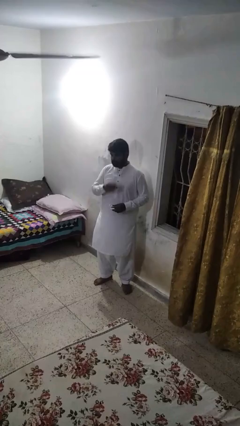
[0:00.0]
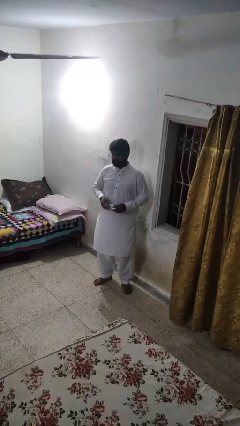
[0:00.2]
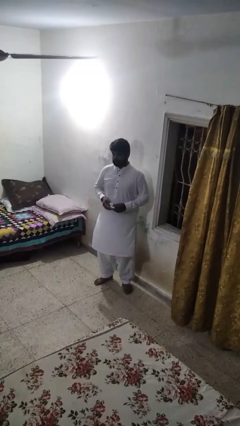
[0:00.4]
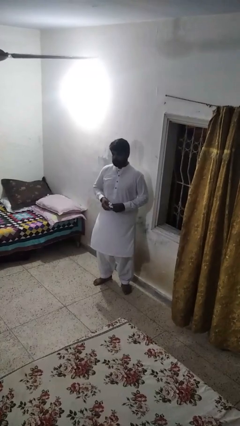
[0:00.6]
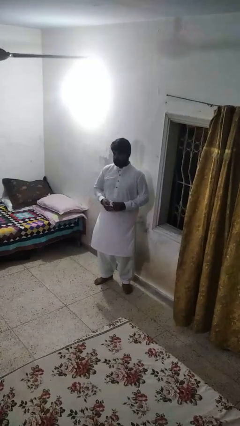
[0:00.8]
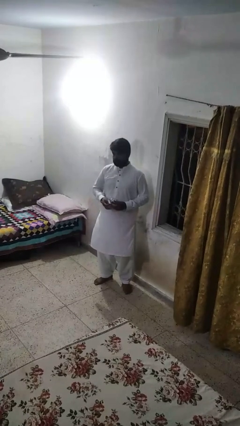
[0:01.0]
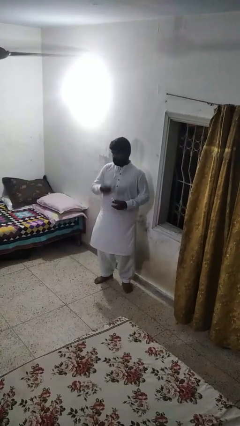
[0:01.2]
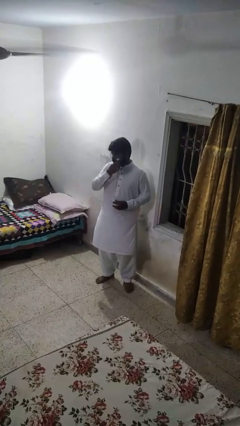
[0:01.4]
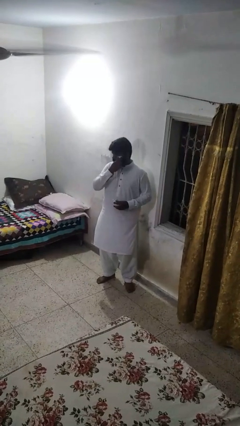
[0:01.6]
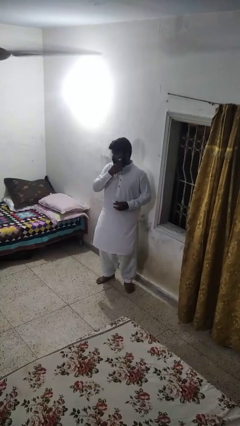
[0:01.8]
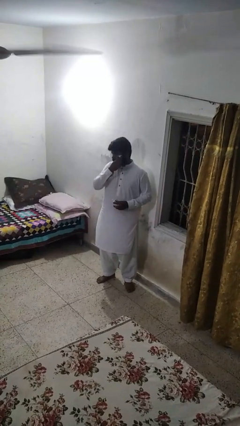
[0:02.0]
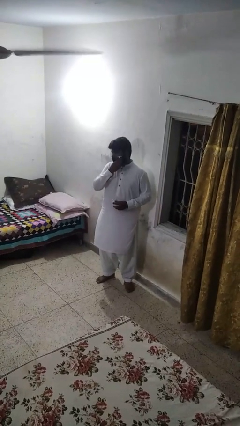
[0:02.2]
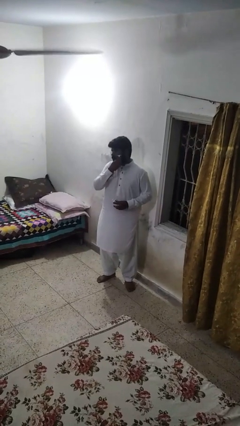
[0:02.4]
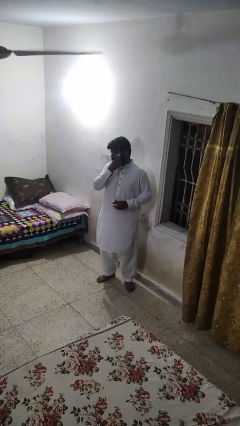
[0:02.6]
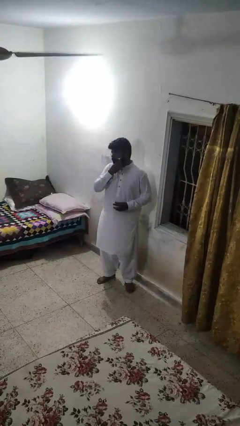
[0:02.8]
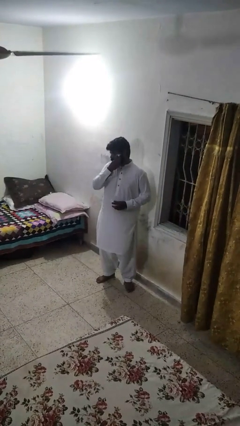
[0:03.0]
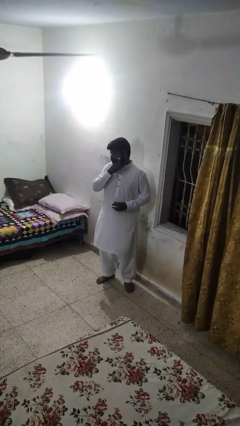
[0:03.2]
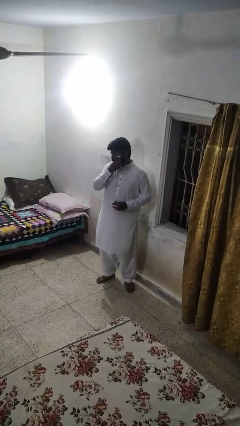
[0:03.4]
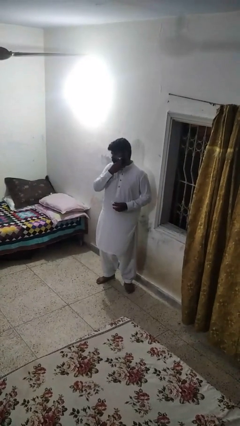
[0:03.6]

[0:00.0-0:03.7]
person shaves face

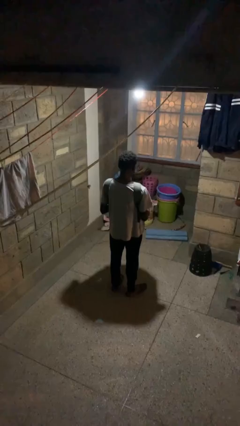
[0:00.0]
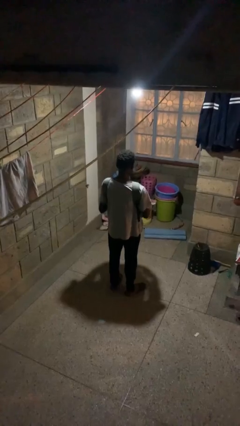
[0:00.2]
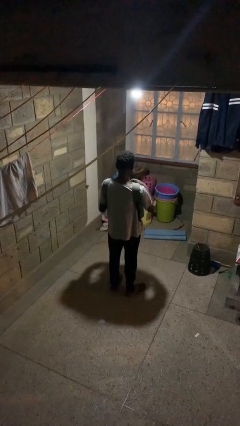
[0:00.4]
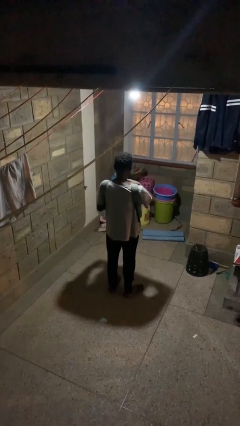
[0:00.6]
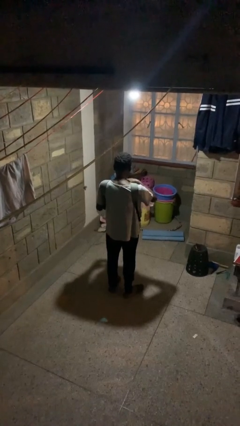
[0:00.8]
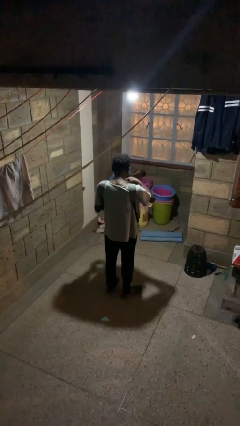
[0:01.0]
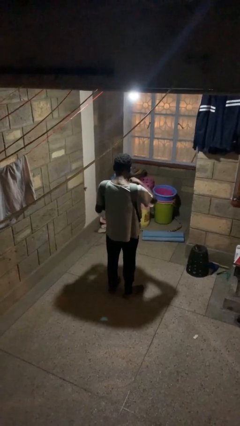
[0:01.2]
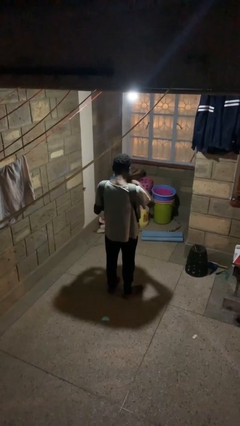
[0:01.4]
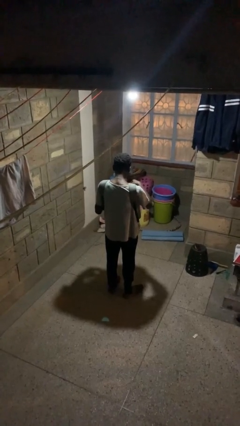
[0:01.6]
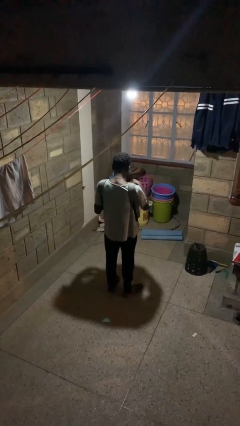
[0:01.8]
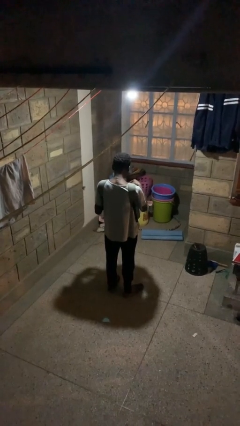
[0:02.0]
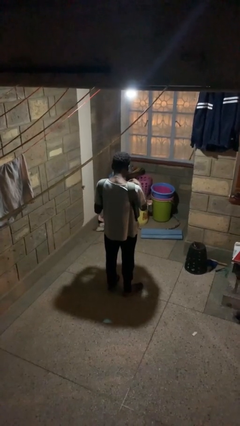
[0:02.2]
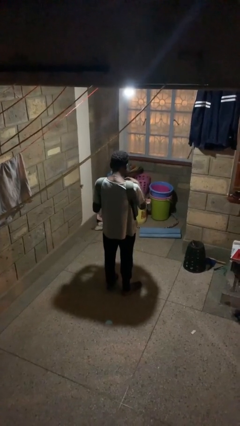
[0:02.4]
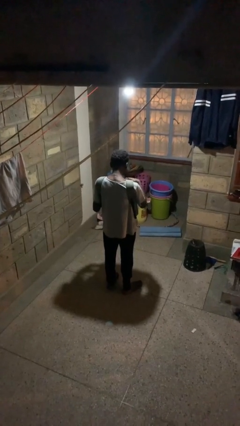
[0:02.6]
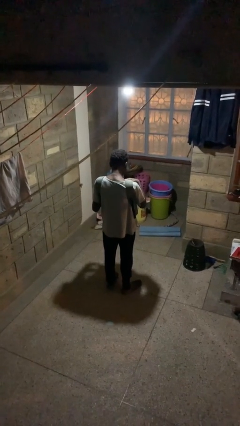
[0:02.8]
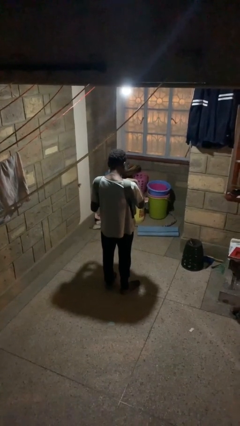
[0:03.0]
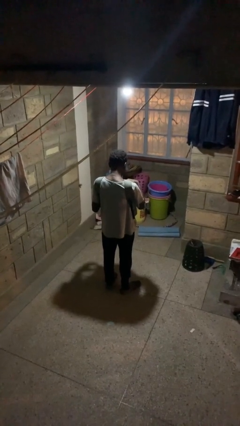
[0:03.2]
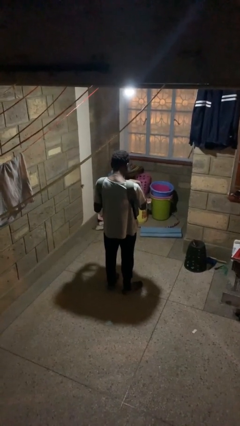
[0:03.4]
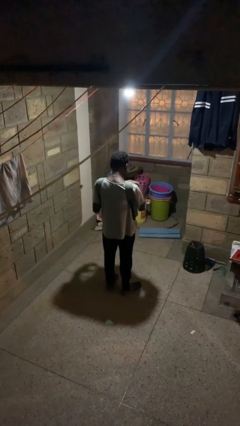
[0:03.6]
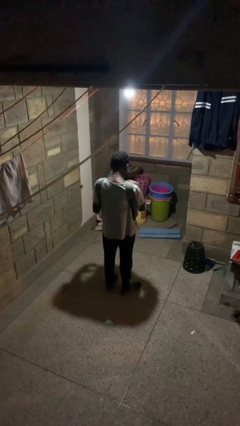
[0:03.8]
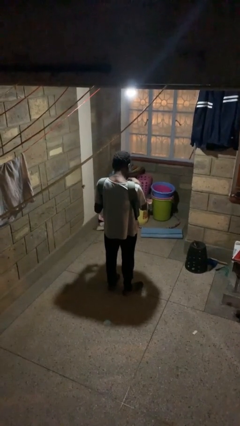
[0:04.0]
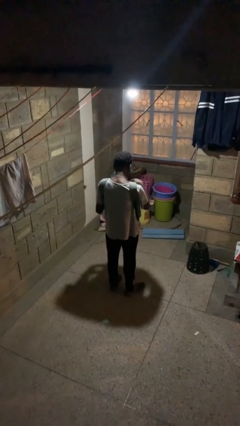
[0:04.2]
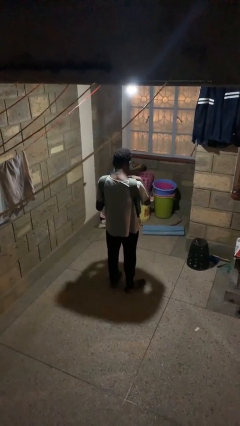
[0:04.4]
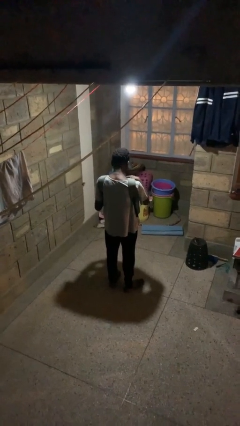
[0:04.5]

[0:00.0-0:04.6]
person searches in backpack

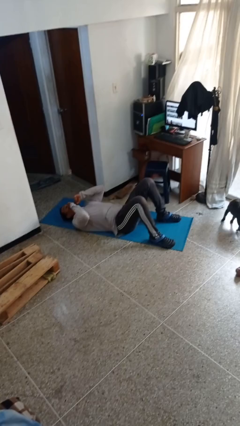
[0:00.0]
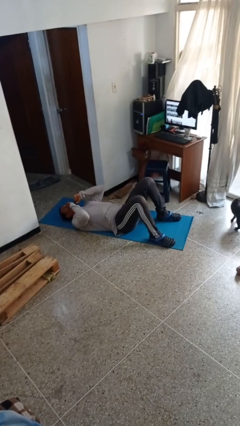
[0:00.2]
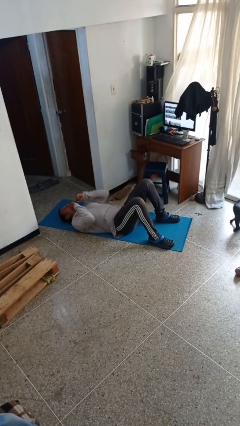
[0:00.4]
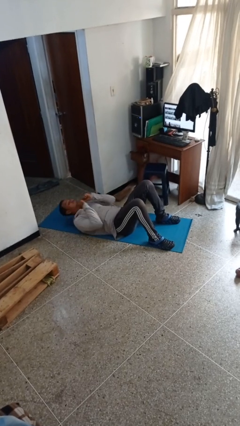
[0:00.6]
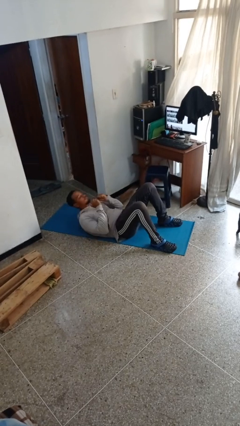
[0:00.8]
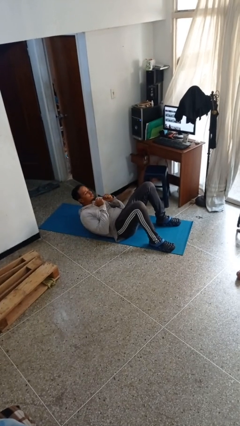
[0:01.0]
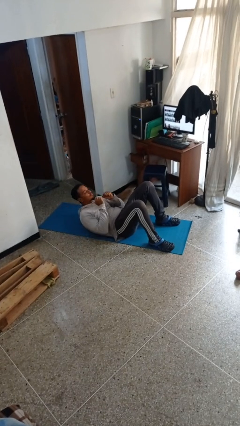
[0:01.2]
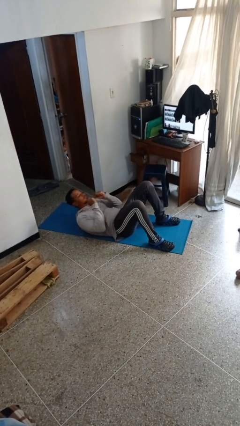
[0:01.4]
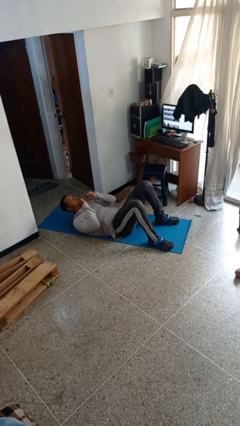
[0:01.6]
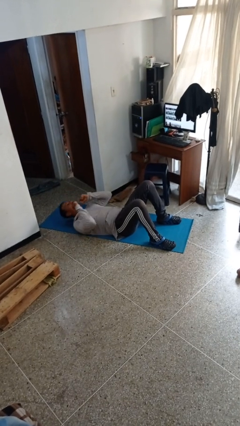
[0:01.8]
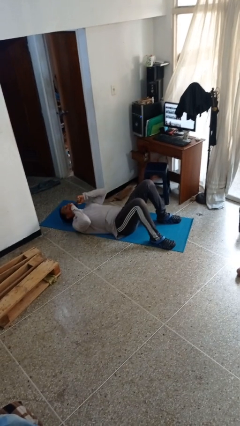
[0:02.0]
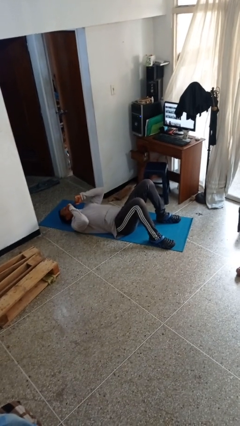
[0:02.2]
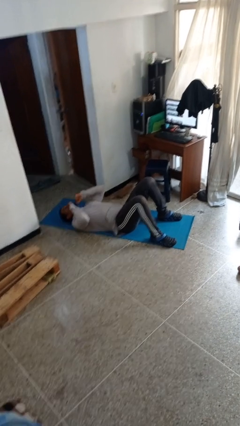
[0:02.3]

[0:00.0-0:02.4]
person exercises with situp

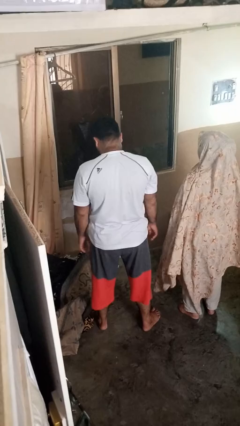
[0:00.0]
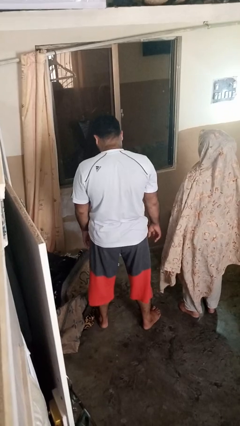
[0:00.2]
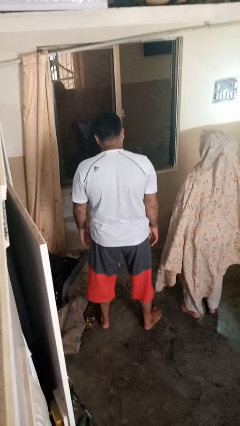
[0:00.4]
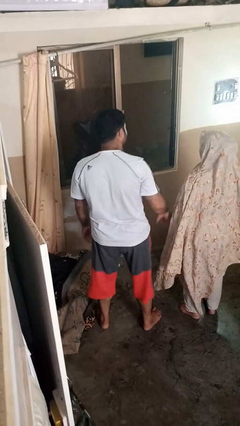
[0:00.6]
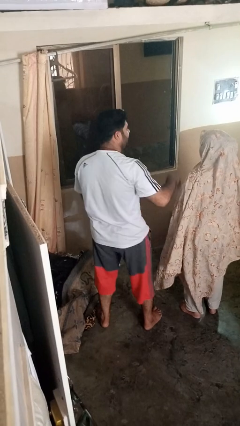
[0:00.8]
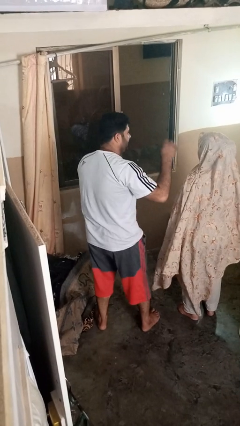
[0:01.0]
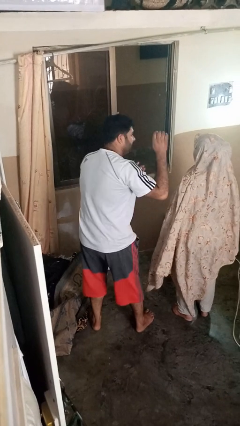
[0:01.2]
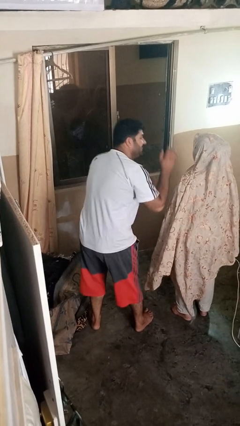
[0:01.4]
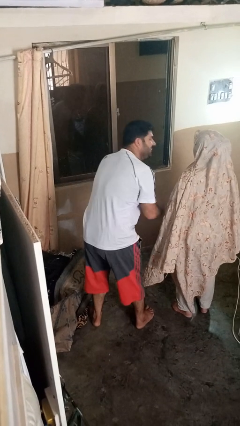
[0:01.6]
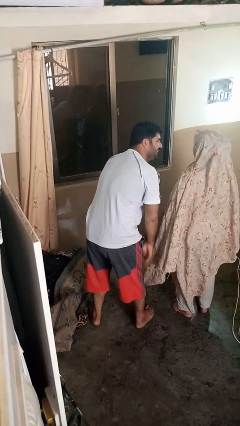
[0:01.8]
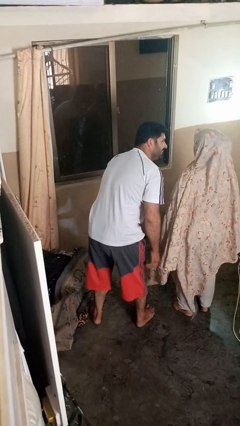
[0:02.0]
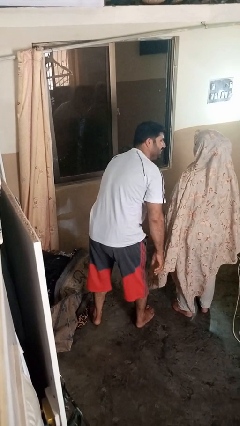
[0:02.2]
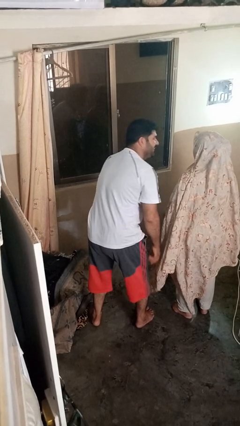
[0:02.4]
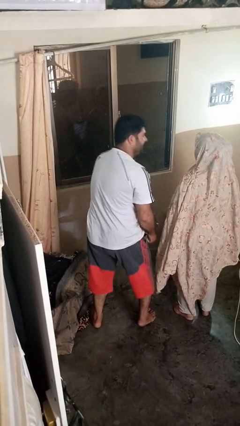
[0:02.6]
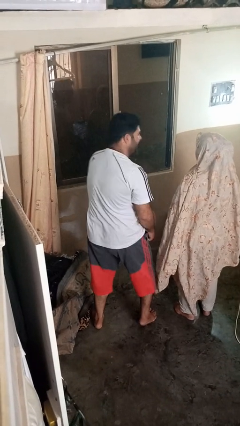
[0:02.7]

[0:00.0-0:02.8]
person laughs with person

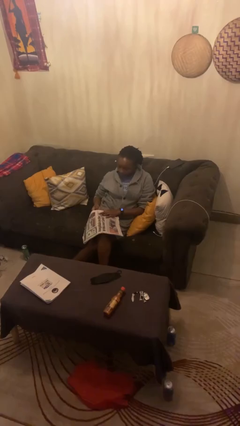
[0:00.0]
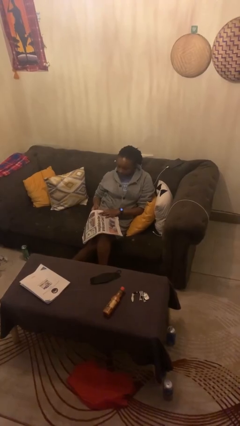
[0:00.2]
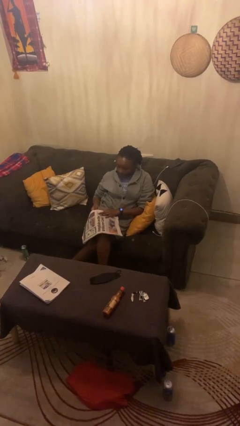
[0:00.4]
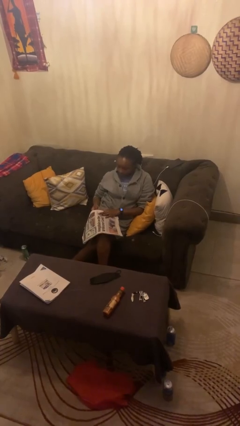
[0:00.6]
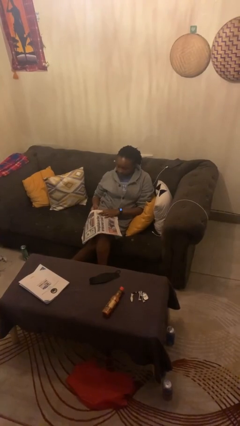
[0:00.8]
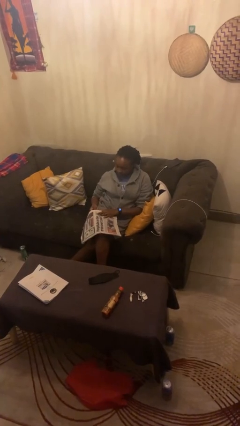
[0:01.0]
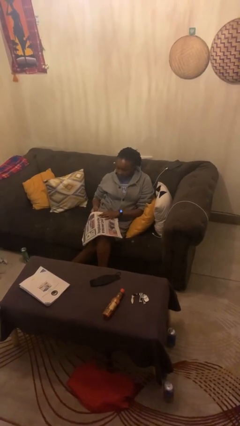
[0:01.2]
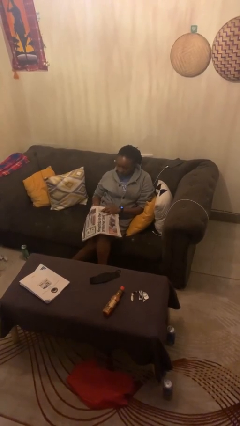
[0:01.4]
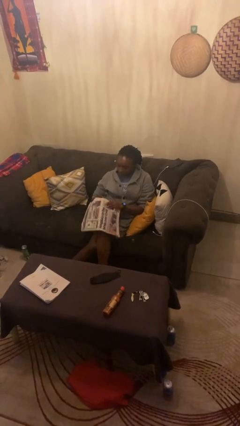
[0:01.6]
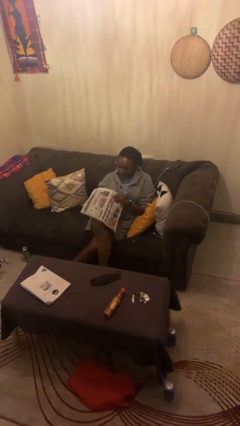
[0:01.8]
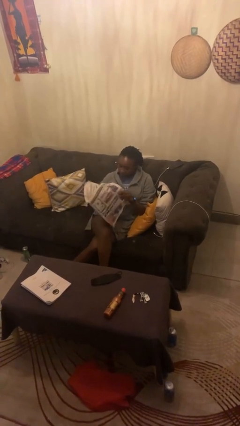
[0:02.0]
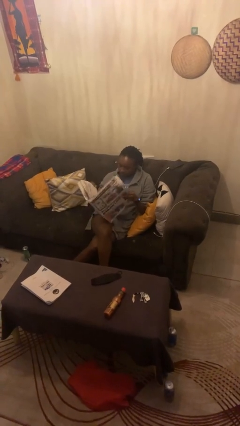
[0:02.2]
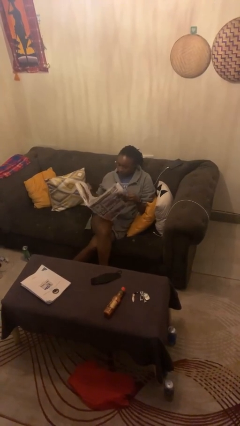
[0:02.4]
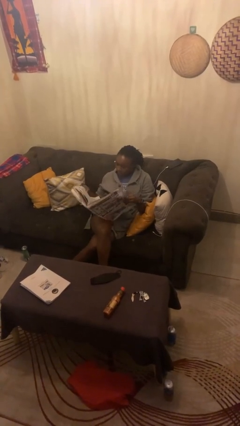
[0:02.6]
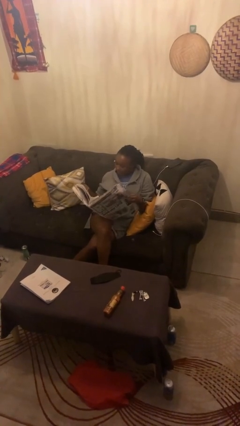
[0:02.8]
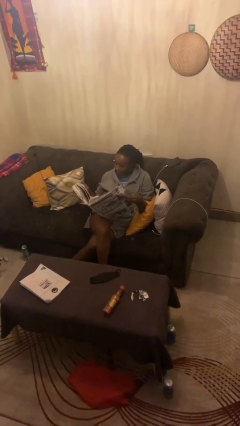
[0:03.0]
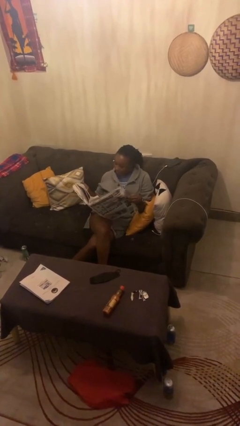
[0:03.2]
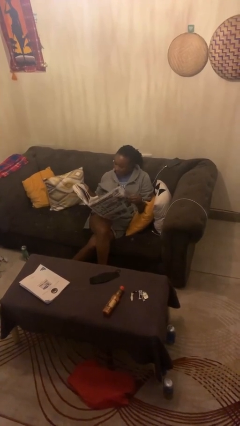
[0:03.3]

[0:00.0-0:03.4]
person reads newspaper

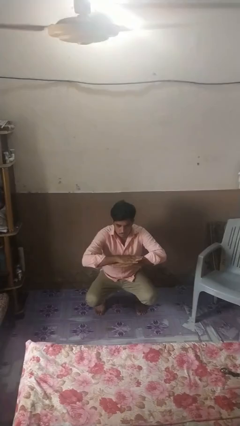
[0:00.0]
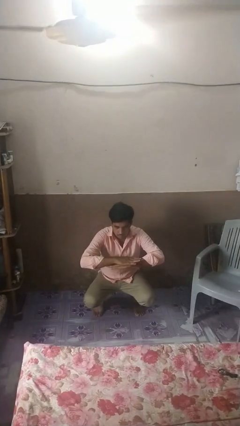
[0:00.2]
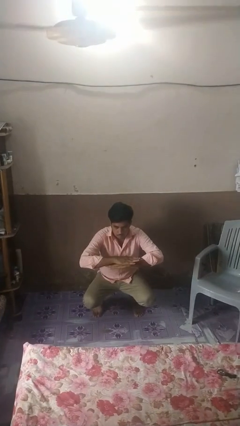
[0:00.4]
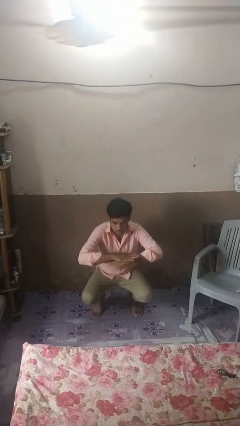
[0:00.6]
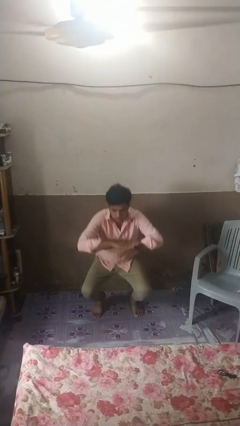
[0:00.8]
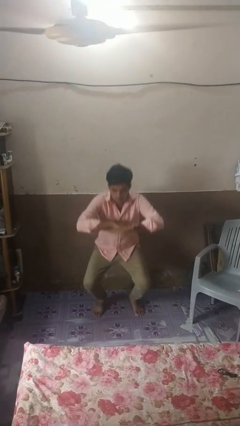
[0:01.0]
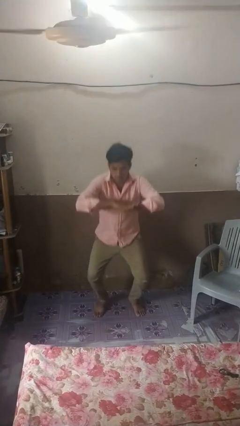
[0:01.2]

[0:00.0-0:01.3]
person squats
